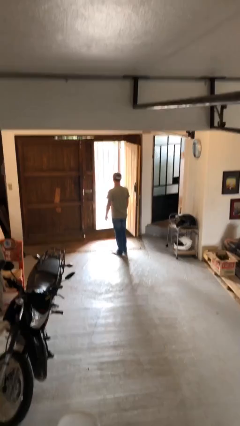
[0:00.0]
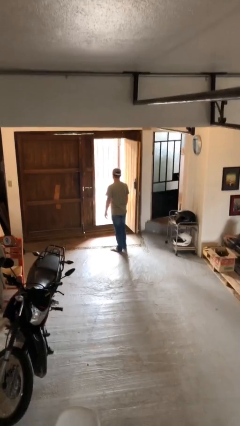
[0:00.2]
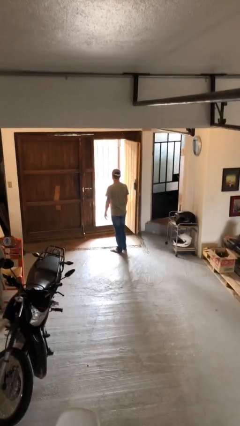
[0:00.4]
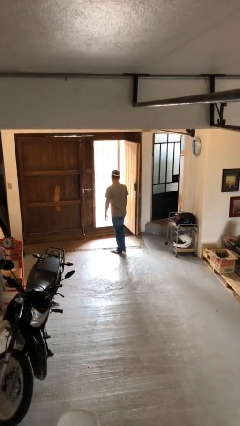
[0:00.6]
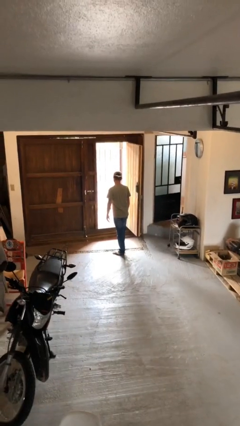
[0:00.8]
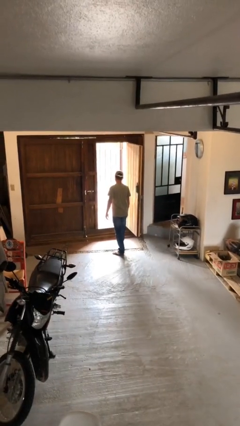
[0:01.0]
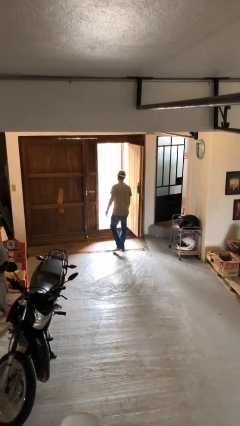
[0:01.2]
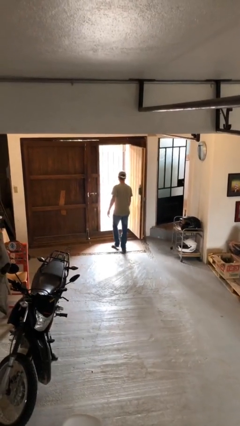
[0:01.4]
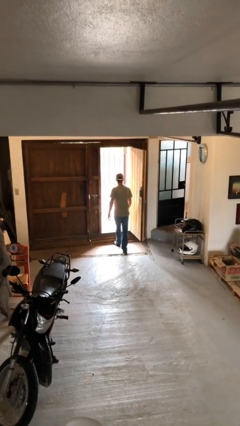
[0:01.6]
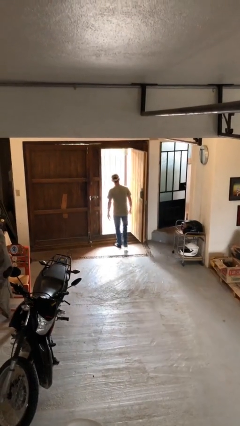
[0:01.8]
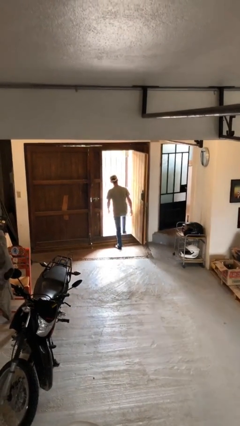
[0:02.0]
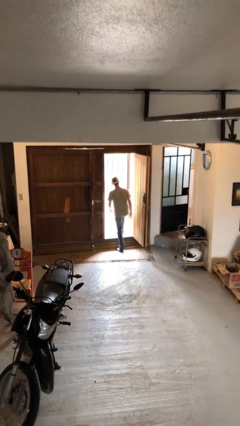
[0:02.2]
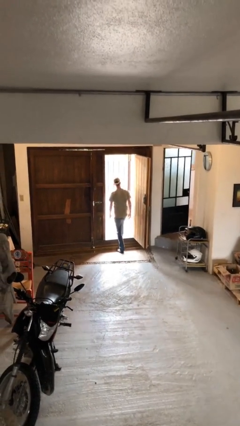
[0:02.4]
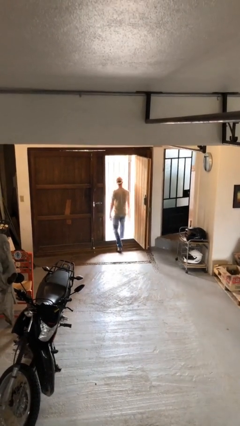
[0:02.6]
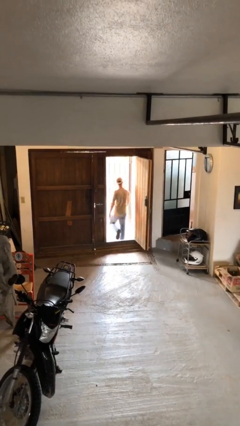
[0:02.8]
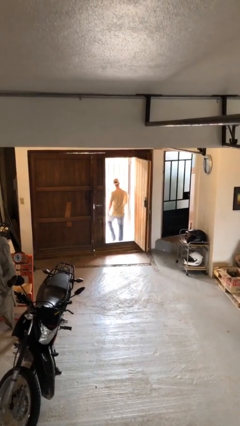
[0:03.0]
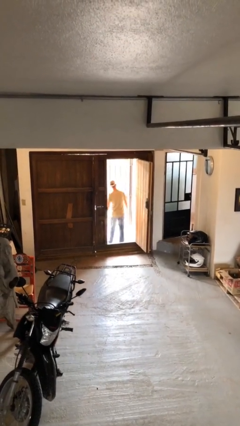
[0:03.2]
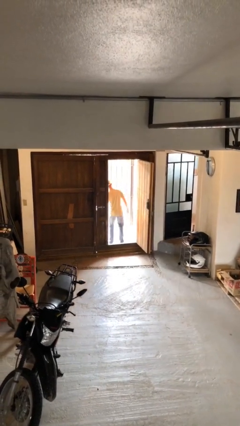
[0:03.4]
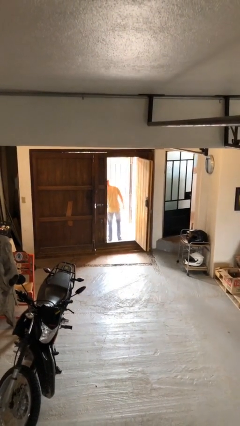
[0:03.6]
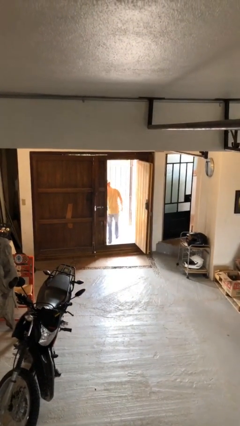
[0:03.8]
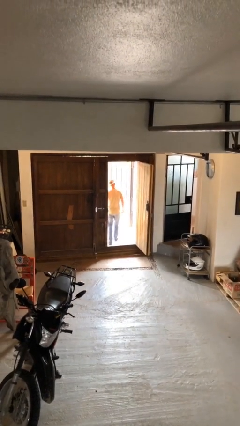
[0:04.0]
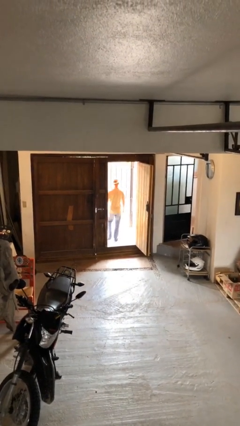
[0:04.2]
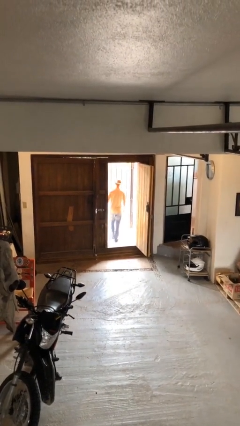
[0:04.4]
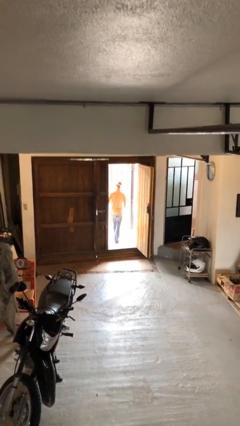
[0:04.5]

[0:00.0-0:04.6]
person exits scene through structure

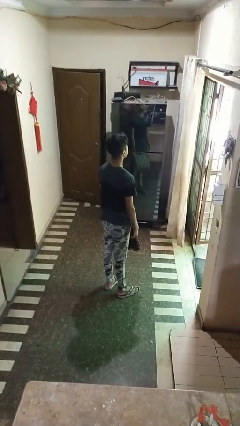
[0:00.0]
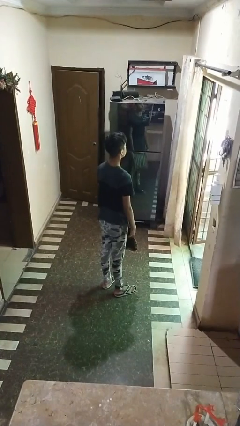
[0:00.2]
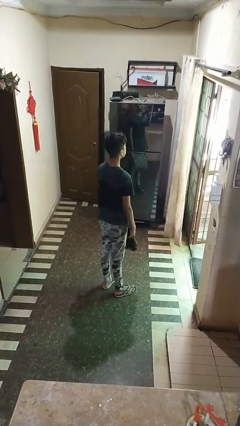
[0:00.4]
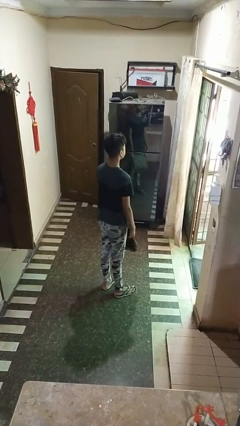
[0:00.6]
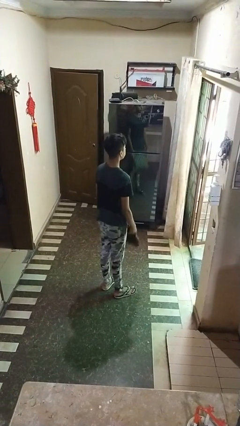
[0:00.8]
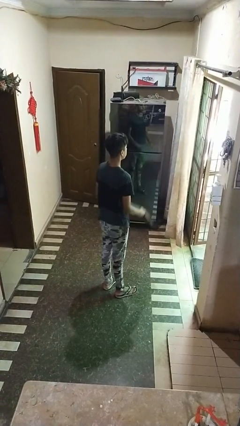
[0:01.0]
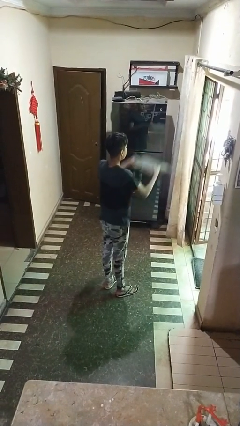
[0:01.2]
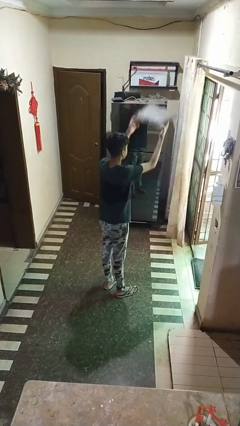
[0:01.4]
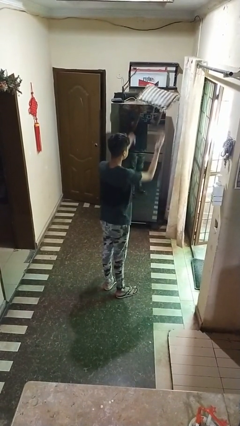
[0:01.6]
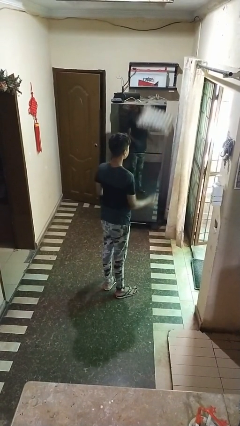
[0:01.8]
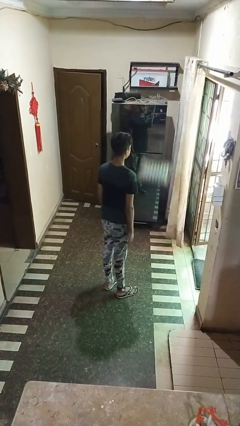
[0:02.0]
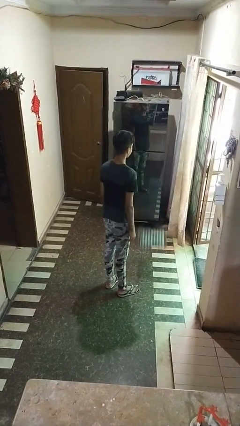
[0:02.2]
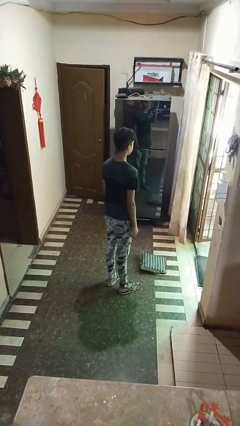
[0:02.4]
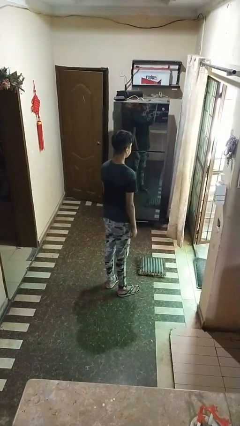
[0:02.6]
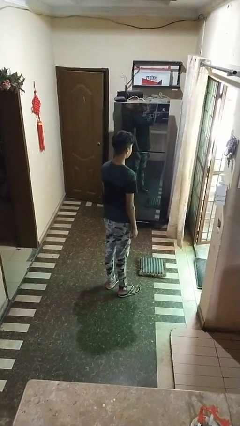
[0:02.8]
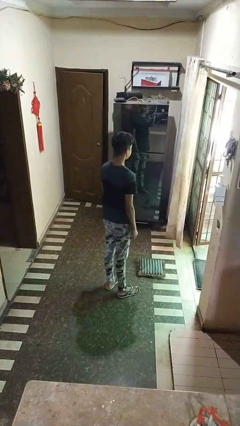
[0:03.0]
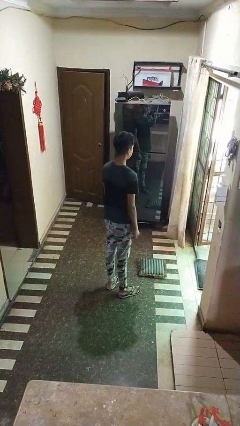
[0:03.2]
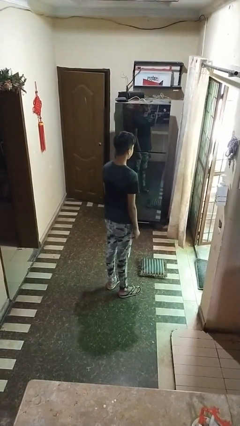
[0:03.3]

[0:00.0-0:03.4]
person throws object into air

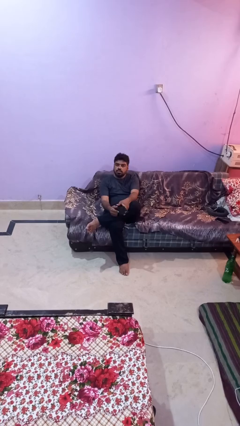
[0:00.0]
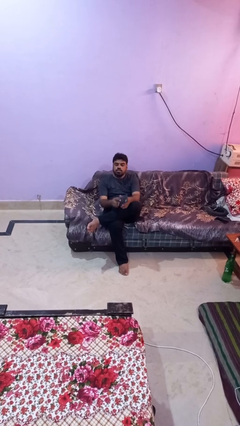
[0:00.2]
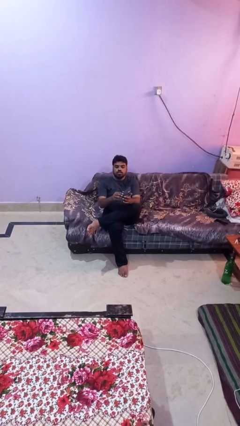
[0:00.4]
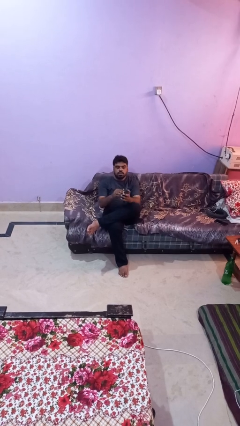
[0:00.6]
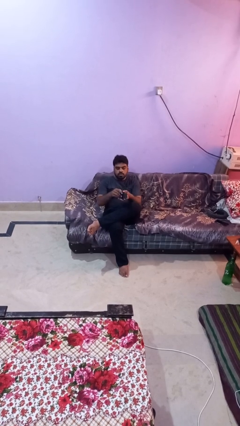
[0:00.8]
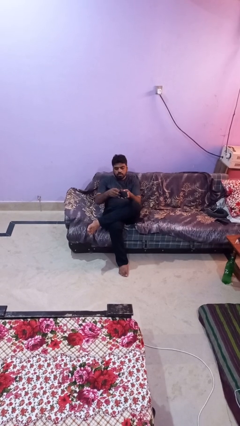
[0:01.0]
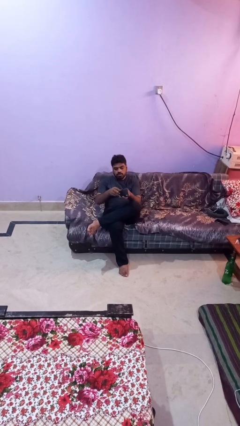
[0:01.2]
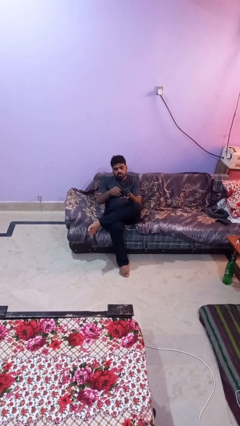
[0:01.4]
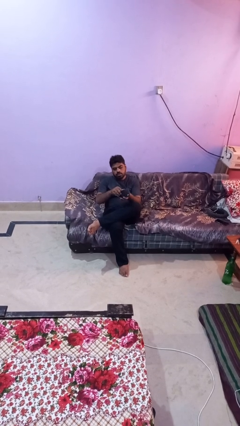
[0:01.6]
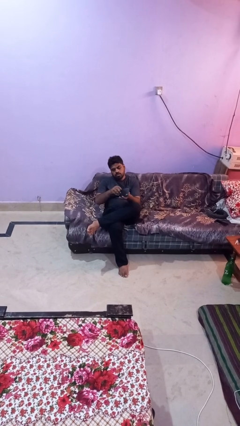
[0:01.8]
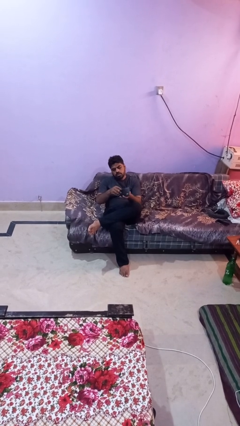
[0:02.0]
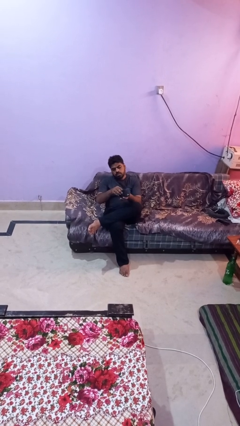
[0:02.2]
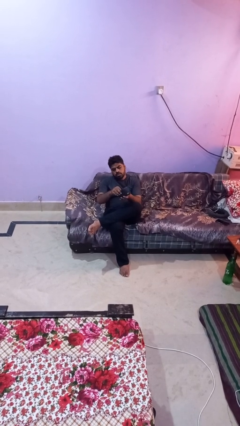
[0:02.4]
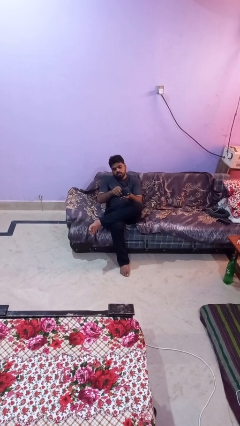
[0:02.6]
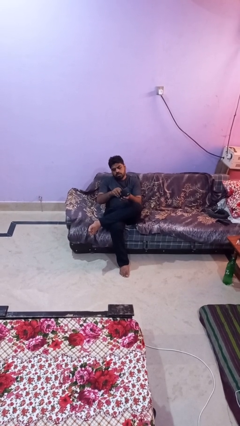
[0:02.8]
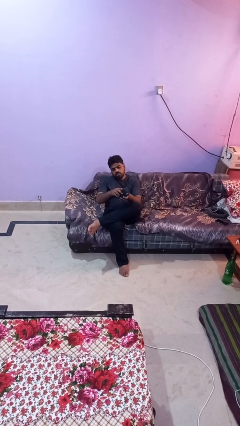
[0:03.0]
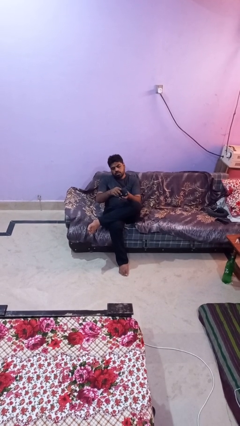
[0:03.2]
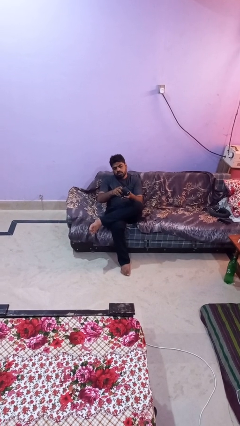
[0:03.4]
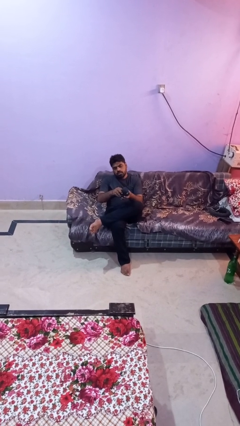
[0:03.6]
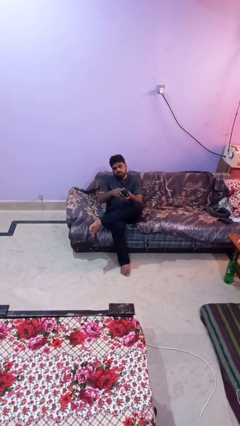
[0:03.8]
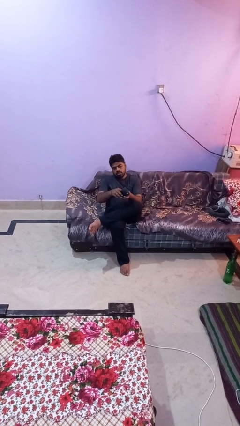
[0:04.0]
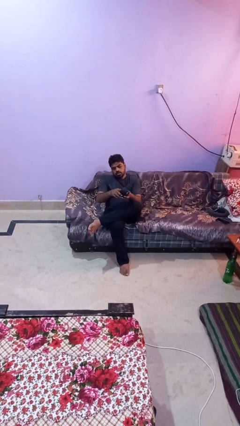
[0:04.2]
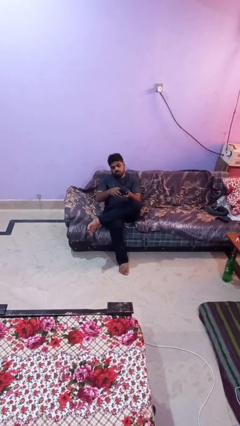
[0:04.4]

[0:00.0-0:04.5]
person searches in purse

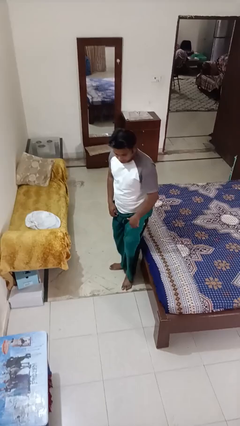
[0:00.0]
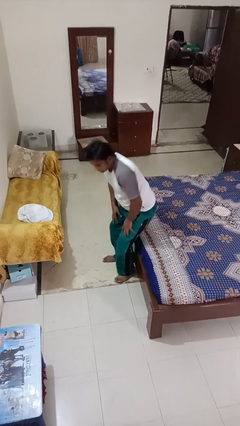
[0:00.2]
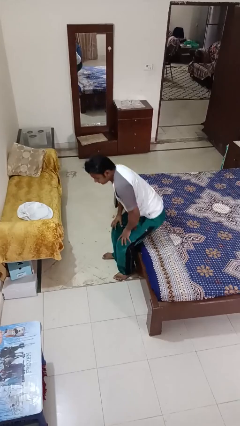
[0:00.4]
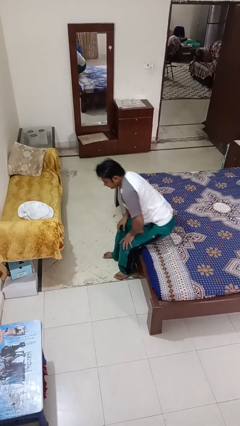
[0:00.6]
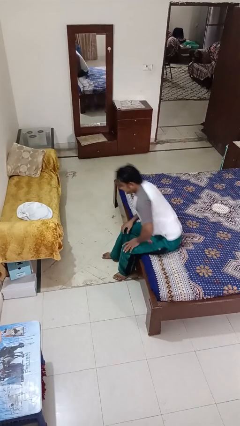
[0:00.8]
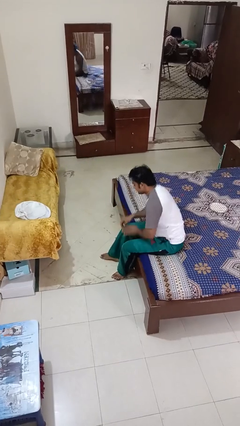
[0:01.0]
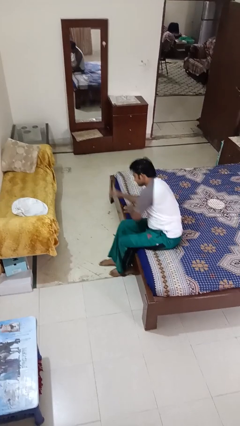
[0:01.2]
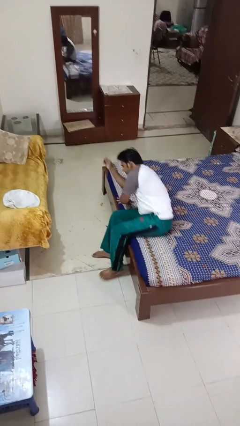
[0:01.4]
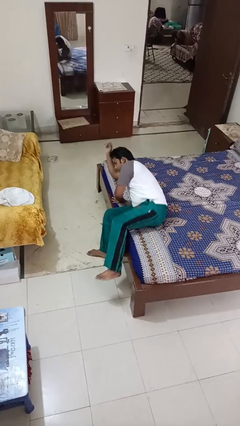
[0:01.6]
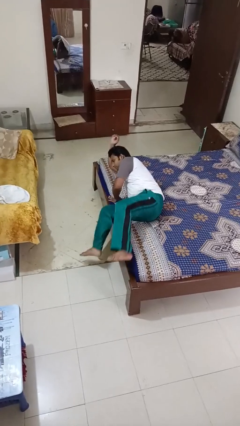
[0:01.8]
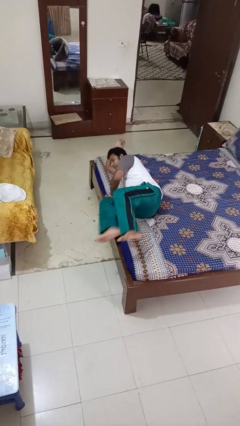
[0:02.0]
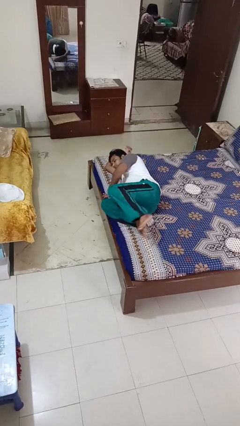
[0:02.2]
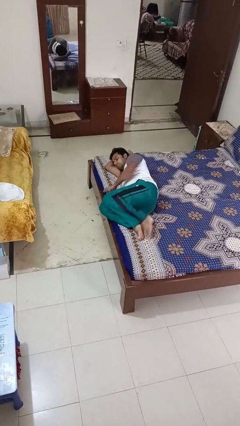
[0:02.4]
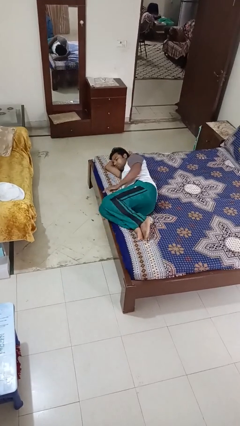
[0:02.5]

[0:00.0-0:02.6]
person lies down on bed

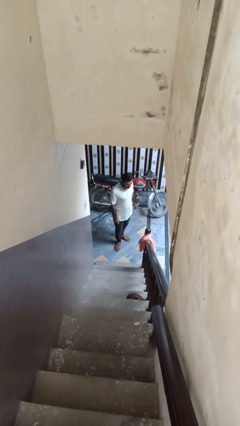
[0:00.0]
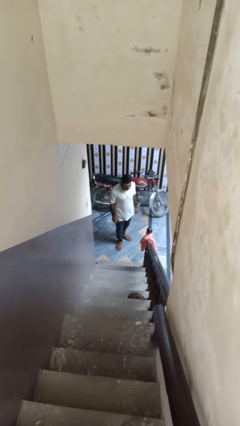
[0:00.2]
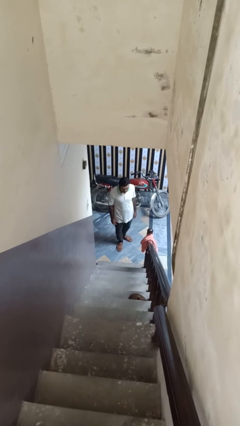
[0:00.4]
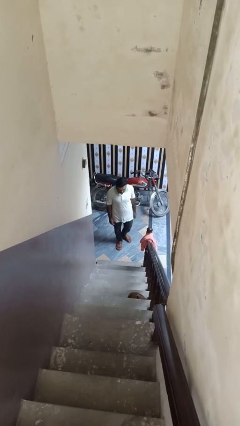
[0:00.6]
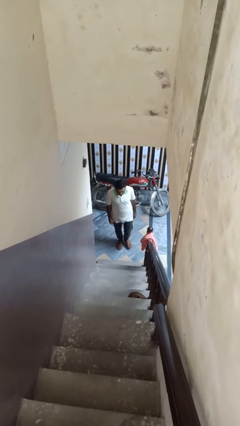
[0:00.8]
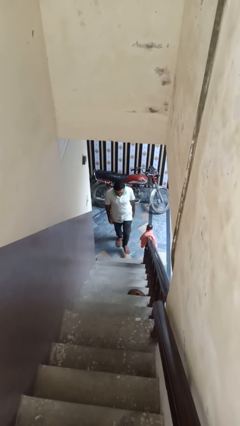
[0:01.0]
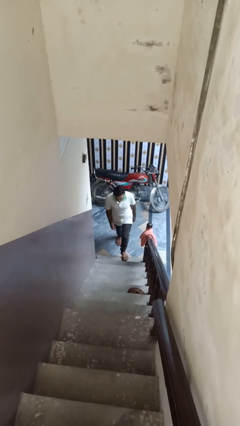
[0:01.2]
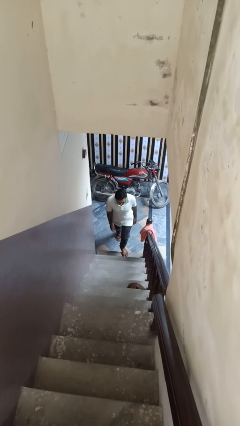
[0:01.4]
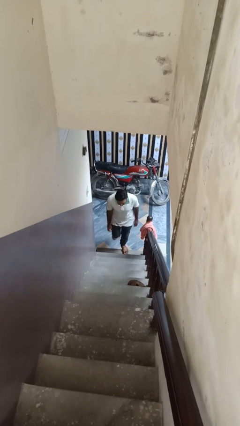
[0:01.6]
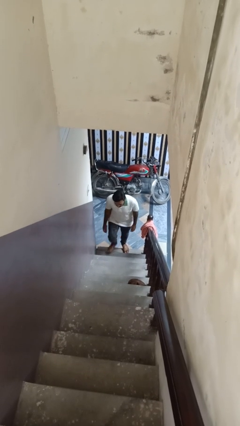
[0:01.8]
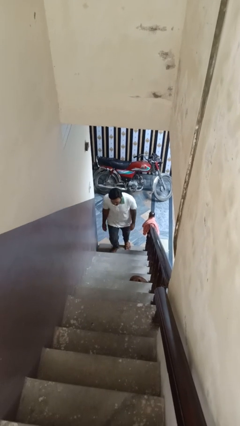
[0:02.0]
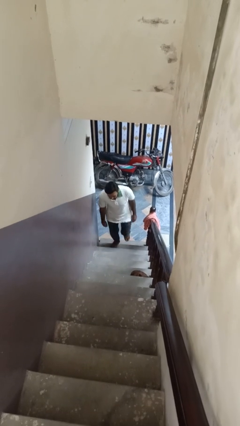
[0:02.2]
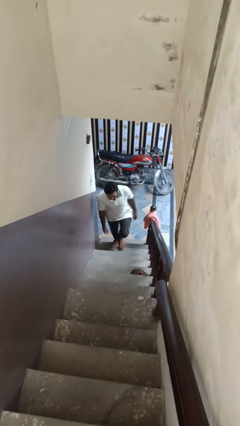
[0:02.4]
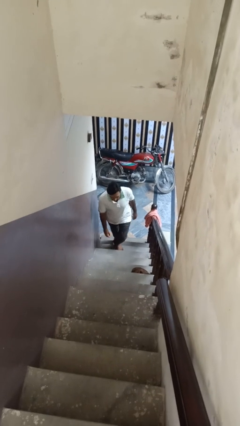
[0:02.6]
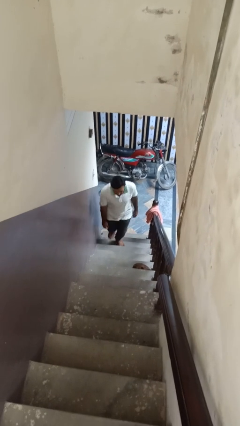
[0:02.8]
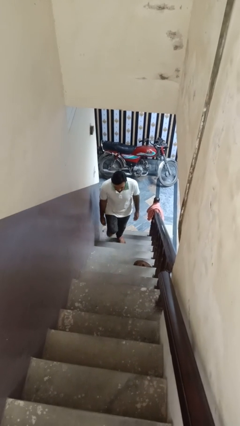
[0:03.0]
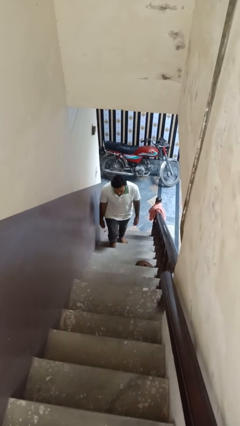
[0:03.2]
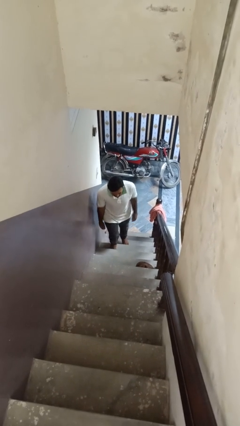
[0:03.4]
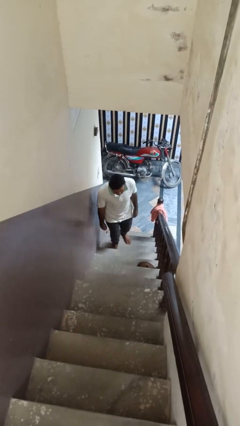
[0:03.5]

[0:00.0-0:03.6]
person climbs up ladder
